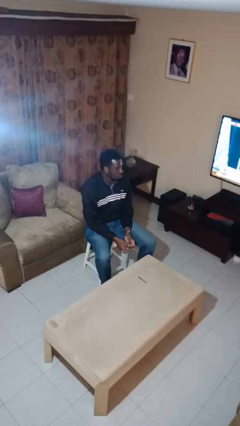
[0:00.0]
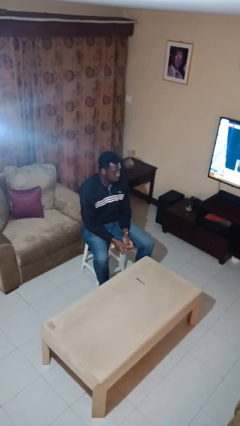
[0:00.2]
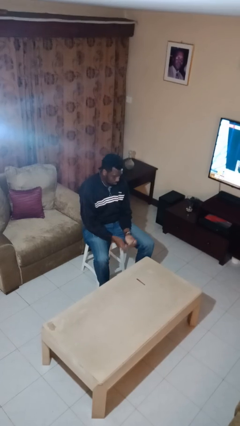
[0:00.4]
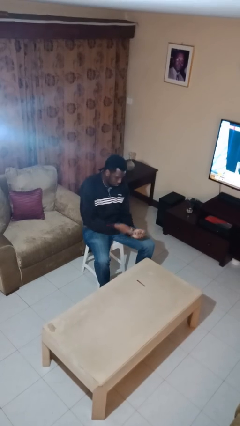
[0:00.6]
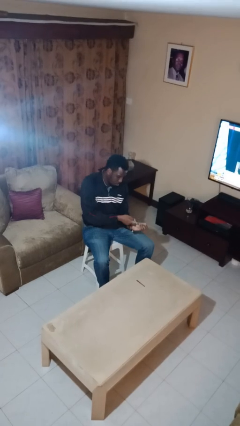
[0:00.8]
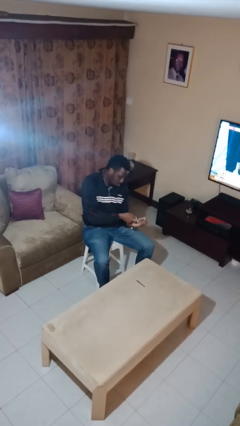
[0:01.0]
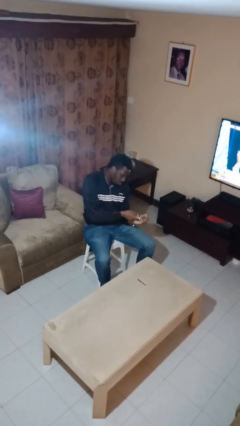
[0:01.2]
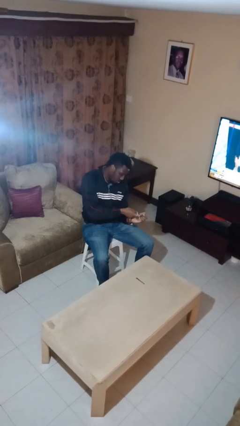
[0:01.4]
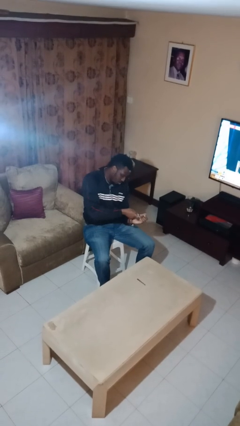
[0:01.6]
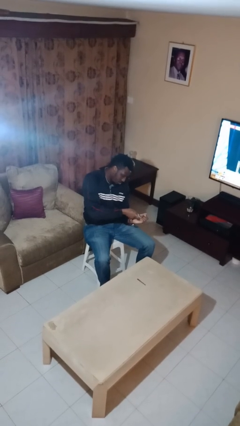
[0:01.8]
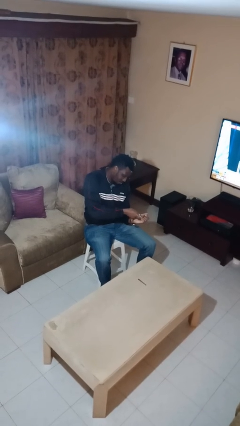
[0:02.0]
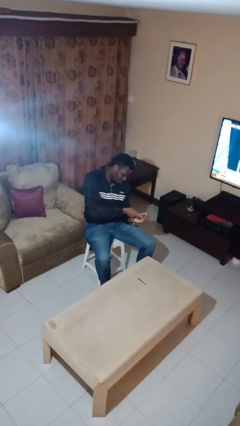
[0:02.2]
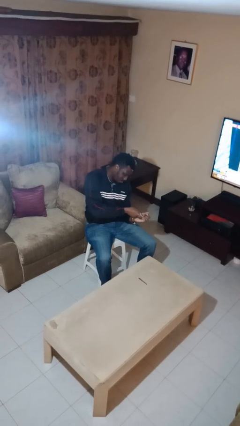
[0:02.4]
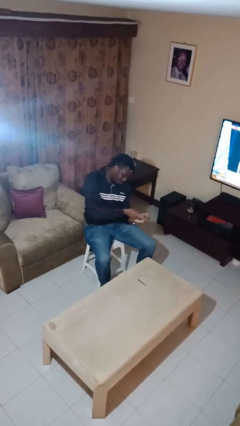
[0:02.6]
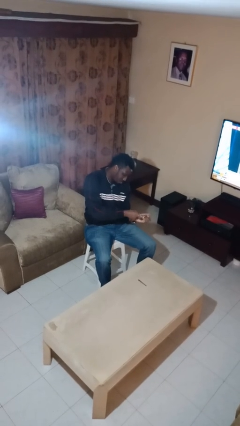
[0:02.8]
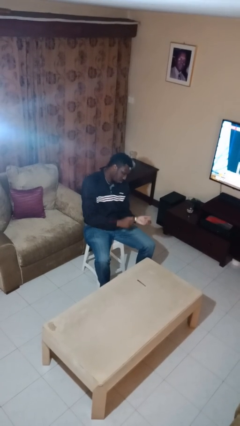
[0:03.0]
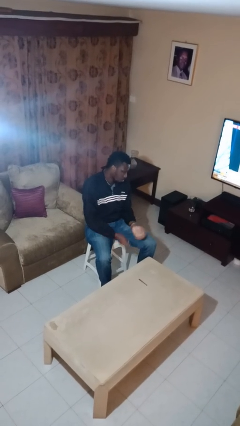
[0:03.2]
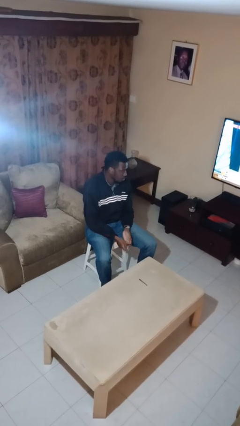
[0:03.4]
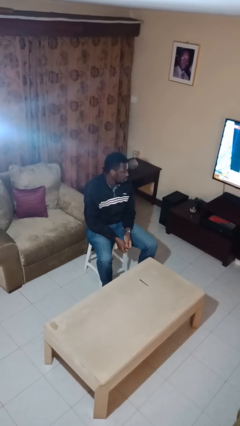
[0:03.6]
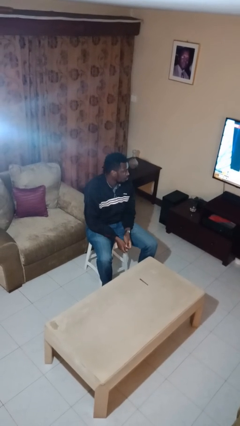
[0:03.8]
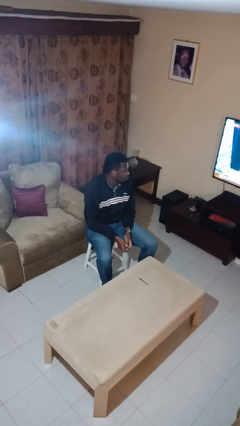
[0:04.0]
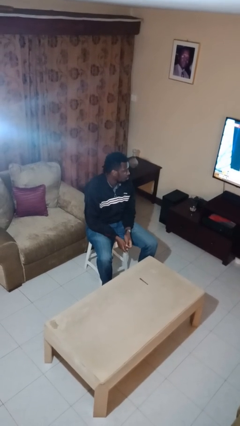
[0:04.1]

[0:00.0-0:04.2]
person clips fingernails

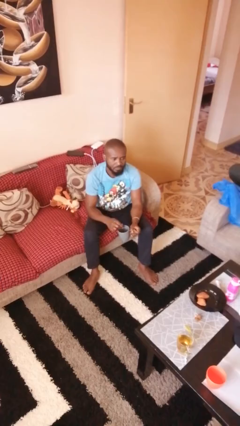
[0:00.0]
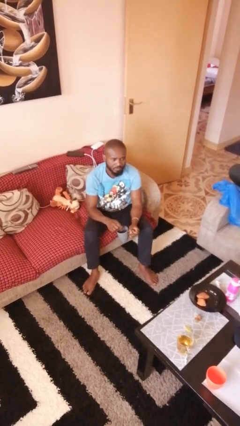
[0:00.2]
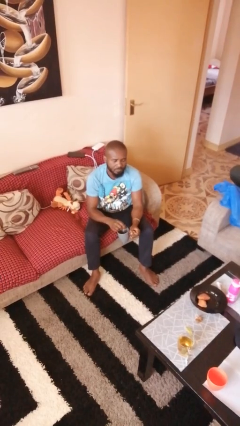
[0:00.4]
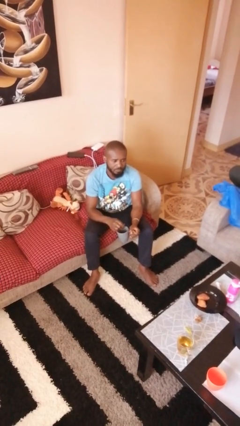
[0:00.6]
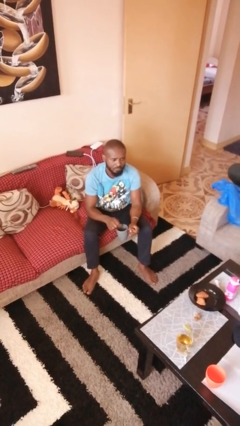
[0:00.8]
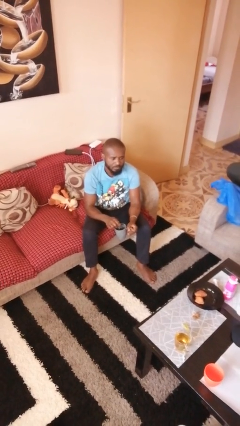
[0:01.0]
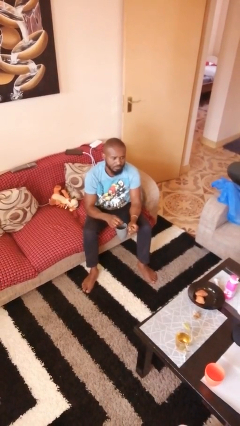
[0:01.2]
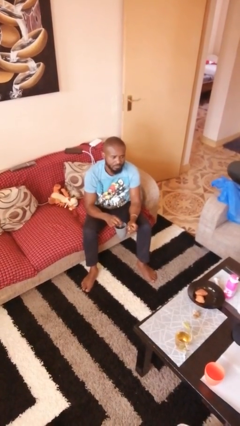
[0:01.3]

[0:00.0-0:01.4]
person stirs mug

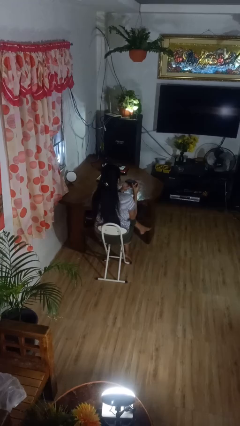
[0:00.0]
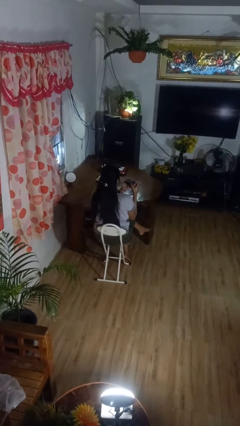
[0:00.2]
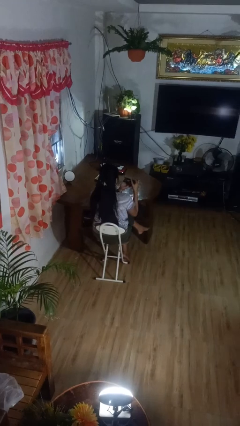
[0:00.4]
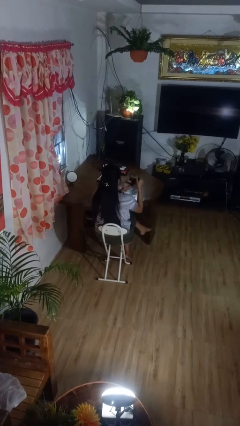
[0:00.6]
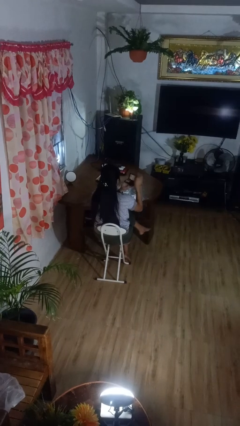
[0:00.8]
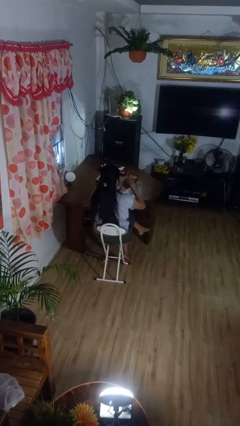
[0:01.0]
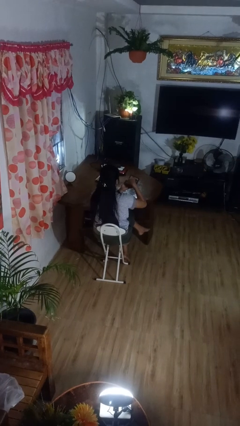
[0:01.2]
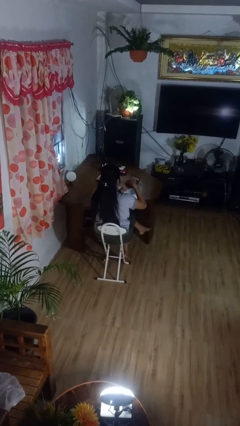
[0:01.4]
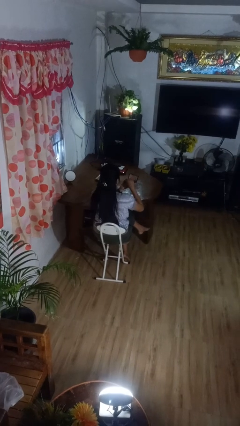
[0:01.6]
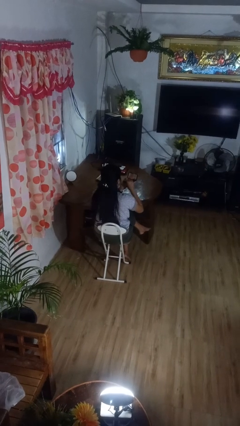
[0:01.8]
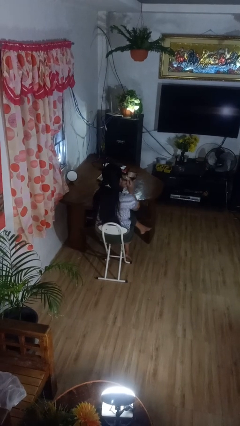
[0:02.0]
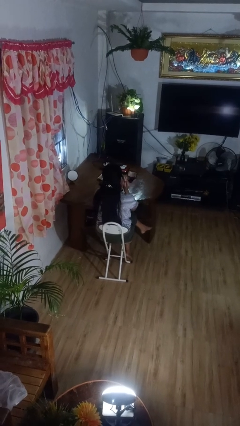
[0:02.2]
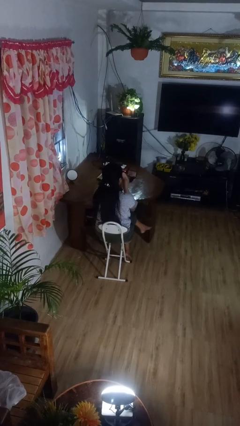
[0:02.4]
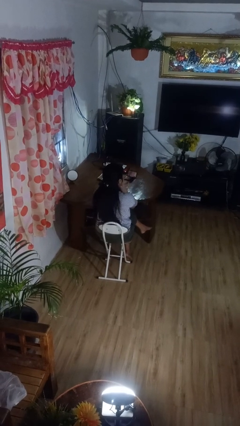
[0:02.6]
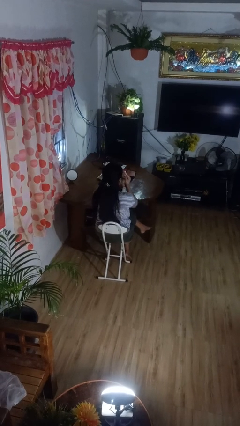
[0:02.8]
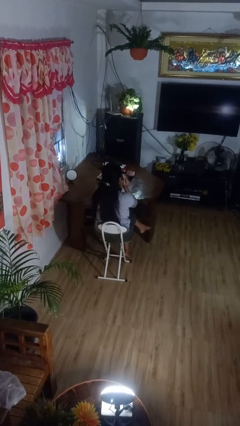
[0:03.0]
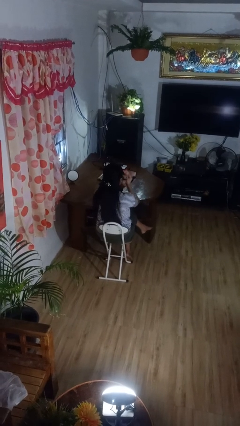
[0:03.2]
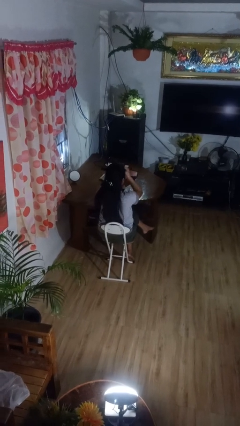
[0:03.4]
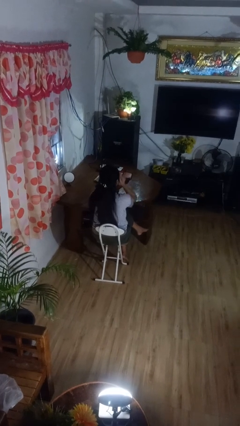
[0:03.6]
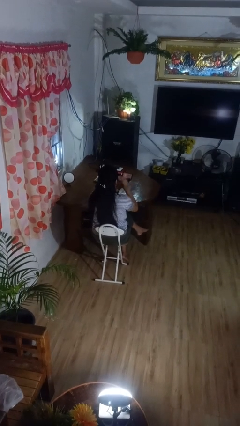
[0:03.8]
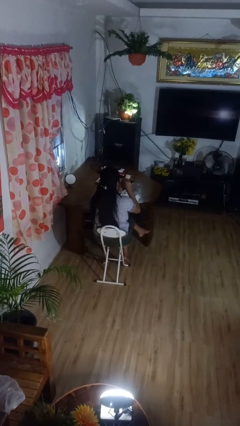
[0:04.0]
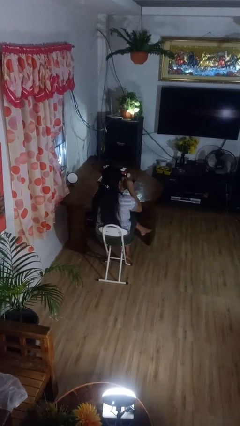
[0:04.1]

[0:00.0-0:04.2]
person applies foundation makeup

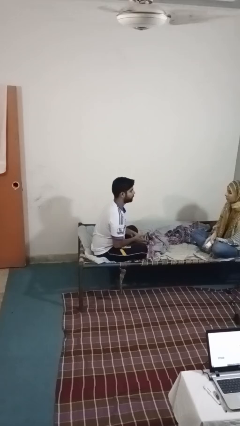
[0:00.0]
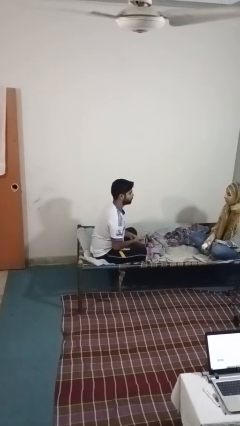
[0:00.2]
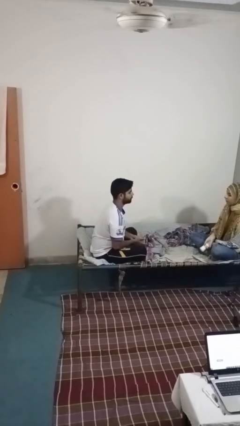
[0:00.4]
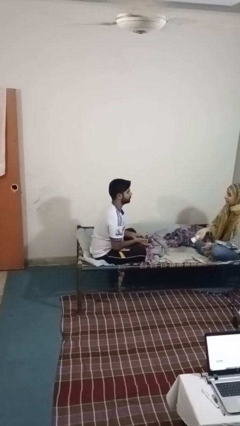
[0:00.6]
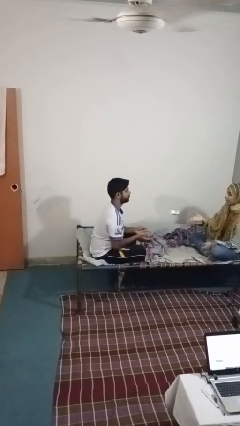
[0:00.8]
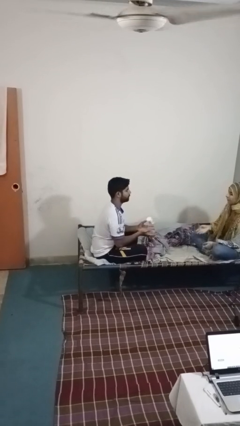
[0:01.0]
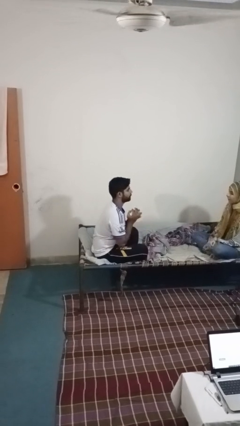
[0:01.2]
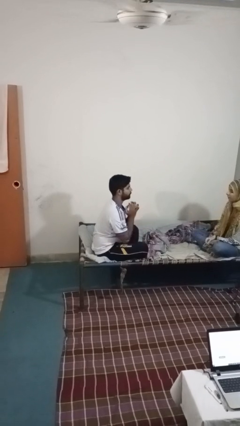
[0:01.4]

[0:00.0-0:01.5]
person catches object from person

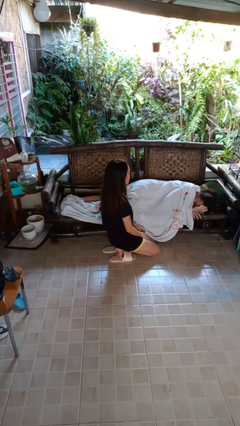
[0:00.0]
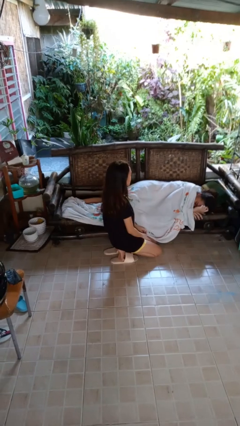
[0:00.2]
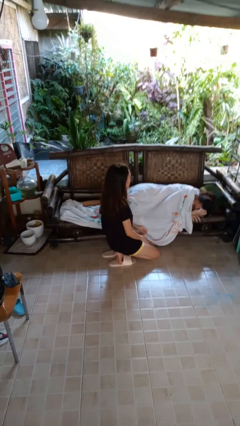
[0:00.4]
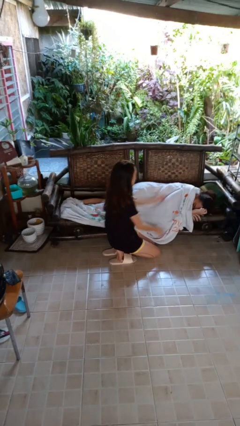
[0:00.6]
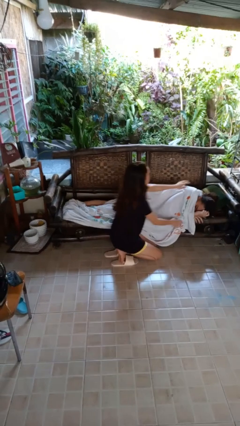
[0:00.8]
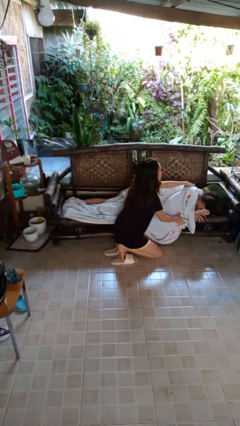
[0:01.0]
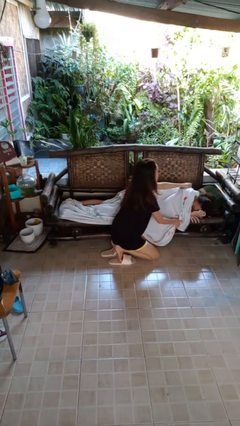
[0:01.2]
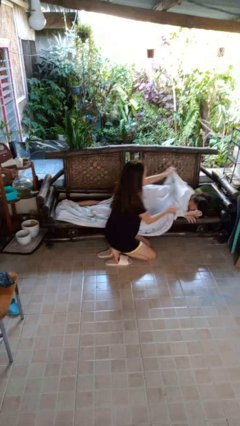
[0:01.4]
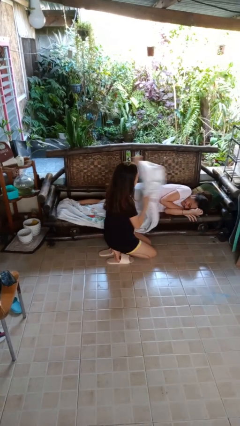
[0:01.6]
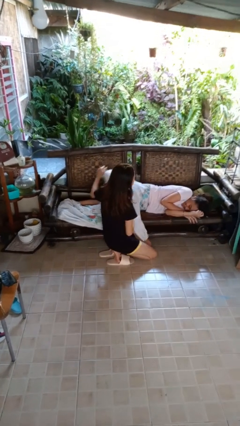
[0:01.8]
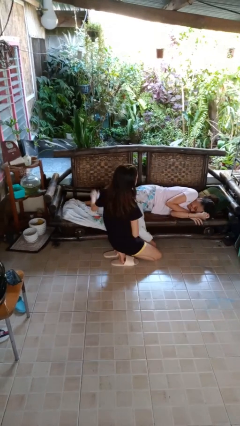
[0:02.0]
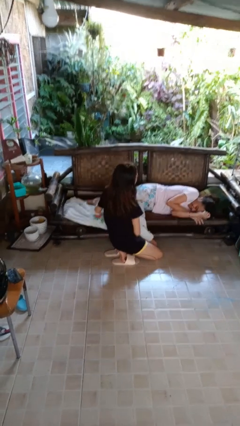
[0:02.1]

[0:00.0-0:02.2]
person uncovers friend with blanket

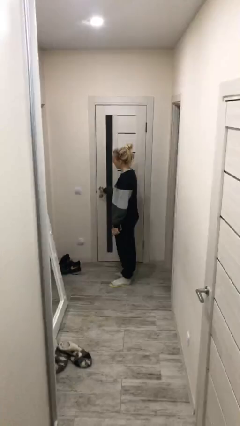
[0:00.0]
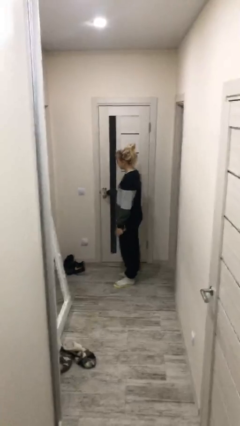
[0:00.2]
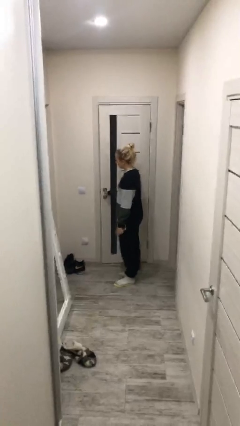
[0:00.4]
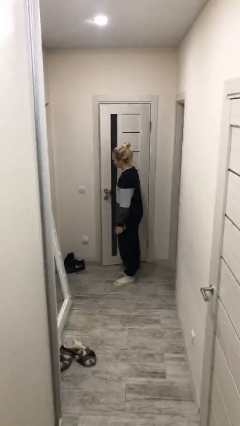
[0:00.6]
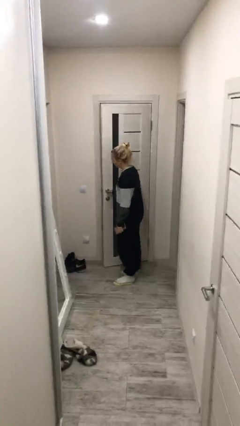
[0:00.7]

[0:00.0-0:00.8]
person opens facility door

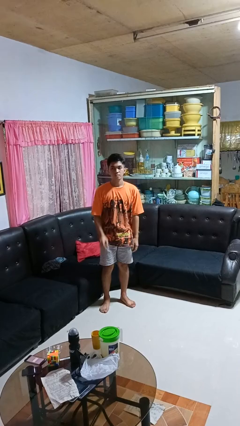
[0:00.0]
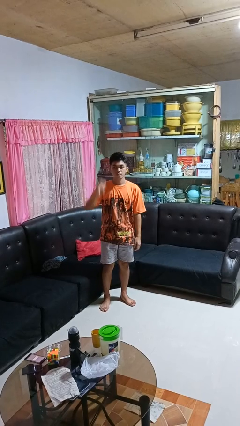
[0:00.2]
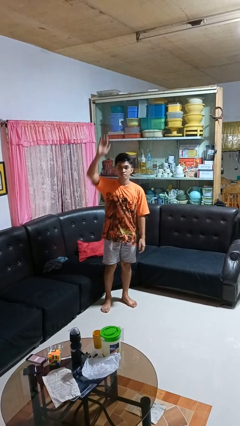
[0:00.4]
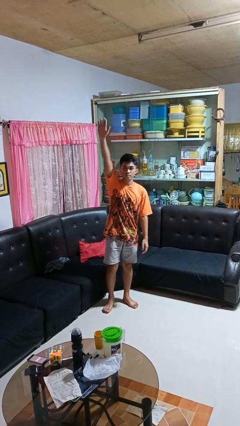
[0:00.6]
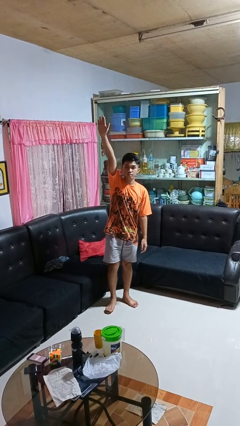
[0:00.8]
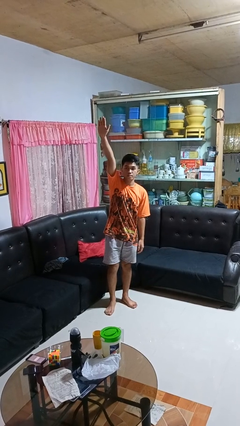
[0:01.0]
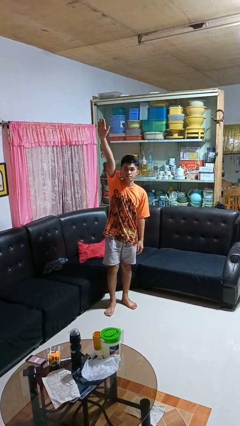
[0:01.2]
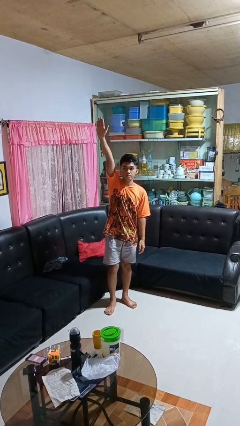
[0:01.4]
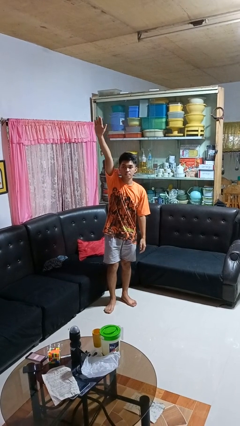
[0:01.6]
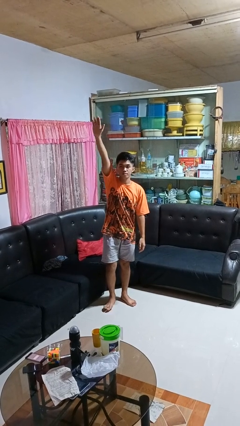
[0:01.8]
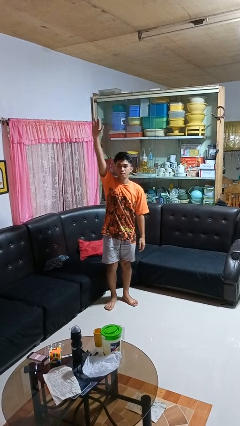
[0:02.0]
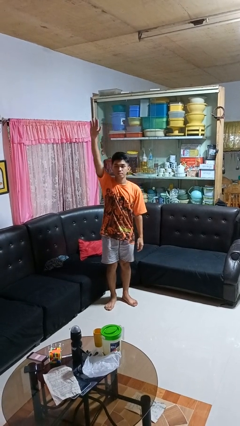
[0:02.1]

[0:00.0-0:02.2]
person gestures raise hand

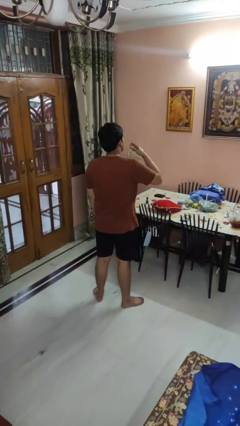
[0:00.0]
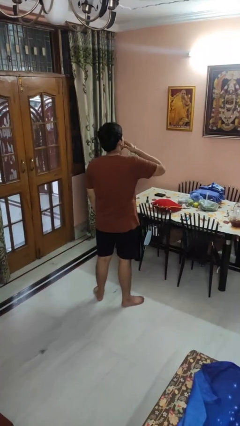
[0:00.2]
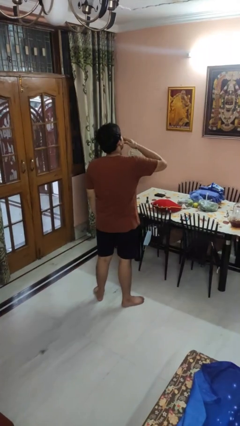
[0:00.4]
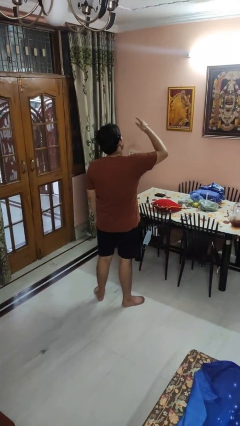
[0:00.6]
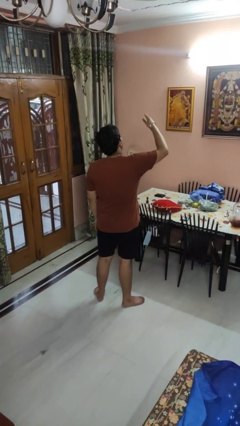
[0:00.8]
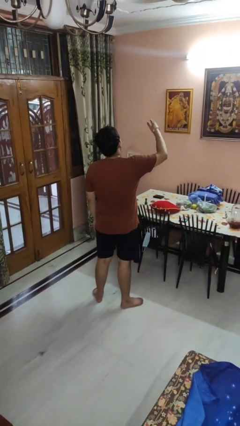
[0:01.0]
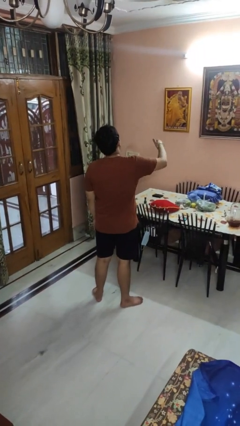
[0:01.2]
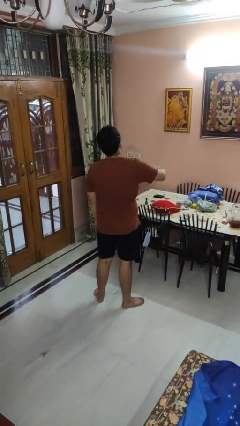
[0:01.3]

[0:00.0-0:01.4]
person gestures blow kiss
